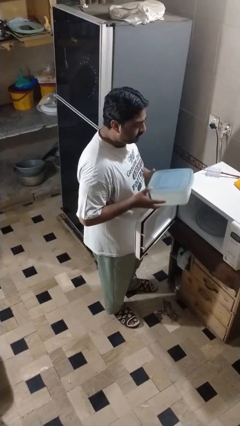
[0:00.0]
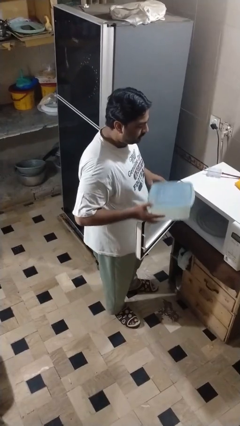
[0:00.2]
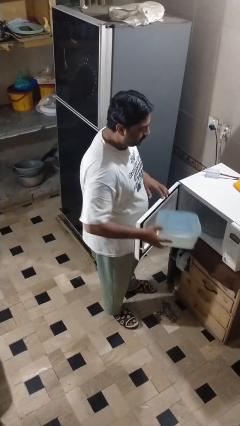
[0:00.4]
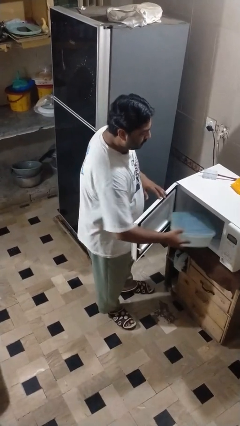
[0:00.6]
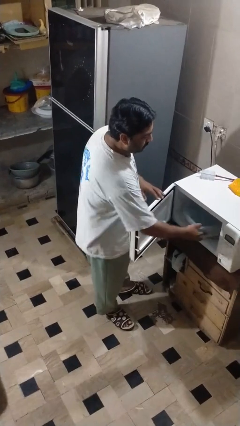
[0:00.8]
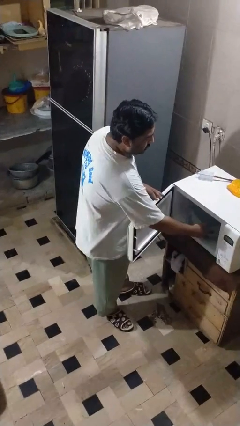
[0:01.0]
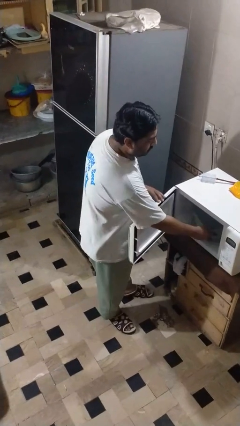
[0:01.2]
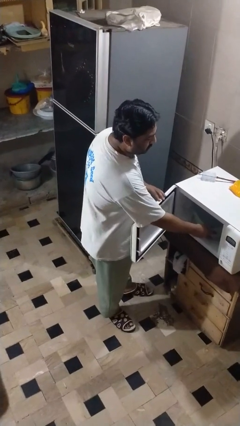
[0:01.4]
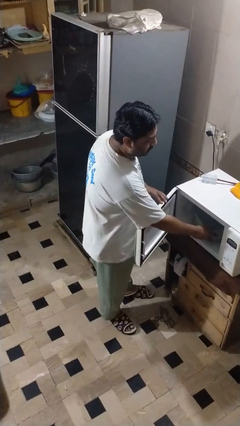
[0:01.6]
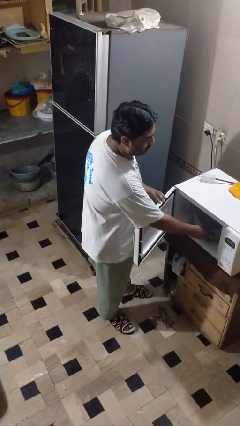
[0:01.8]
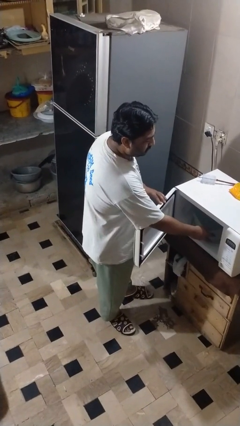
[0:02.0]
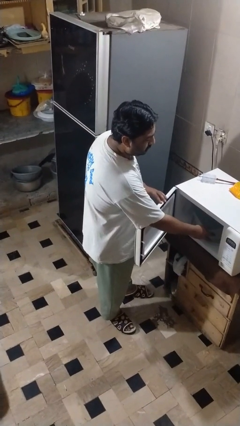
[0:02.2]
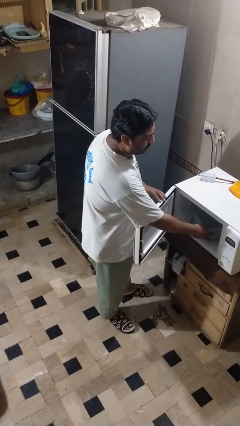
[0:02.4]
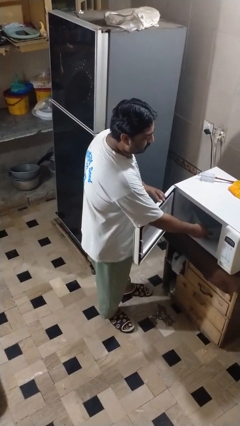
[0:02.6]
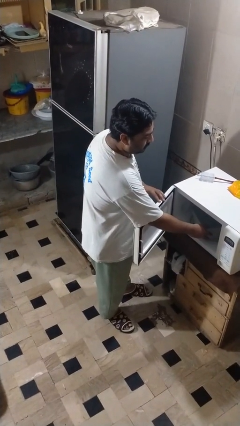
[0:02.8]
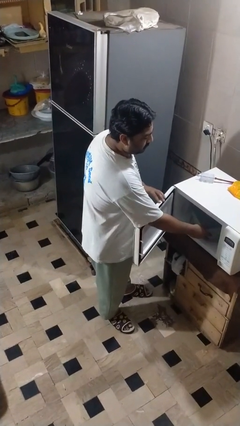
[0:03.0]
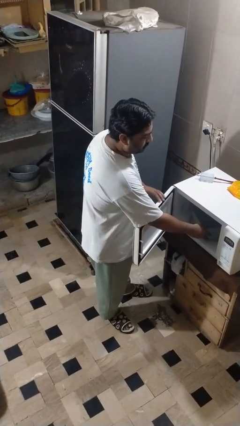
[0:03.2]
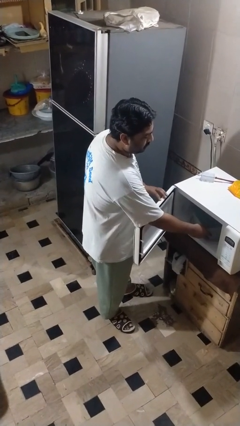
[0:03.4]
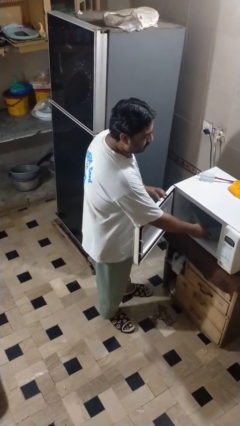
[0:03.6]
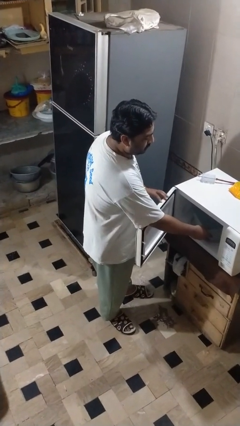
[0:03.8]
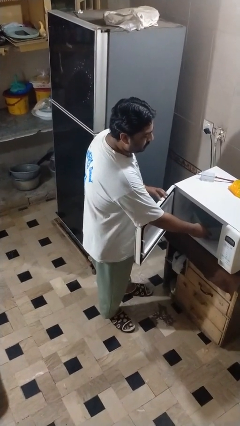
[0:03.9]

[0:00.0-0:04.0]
person puts object into microwave

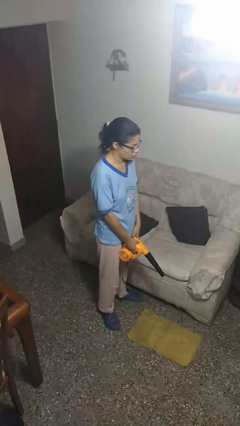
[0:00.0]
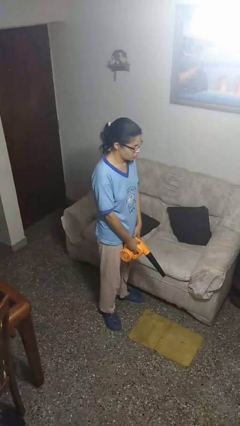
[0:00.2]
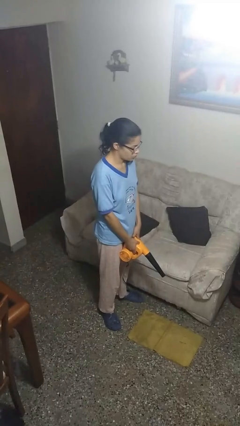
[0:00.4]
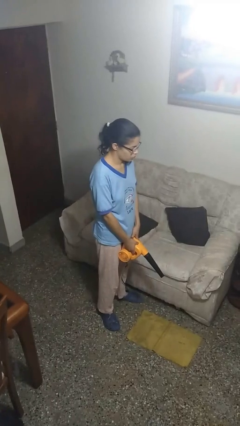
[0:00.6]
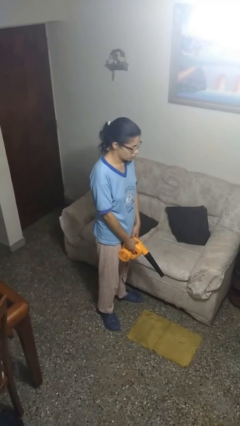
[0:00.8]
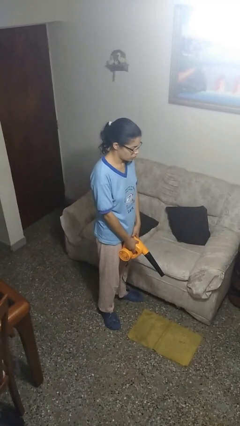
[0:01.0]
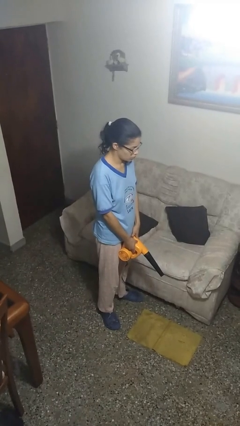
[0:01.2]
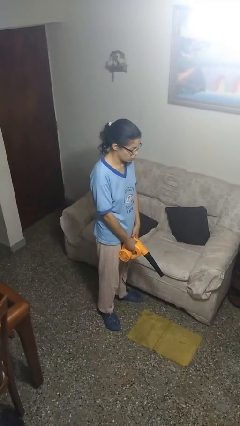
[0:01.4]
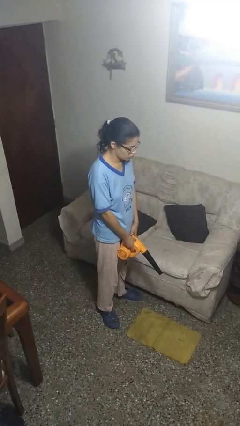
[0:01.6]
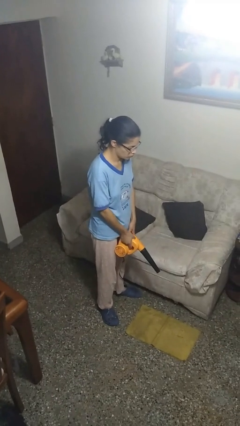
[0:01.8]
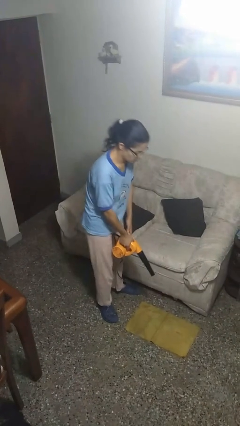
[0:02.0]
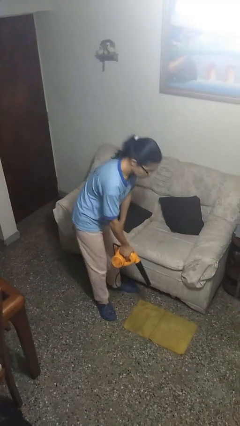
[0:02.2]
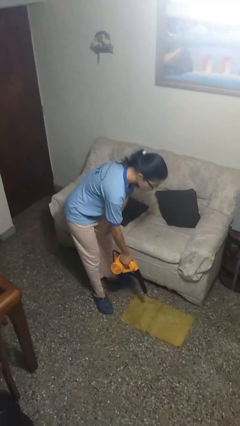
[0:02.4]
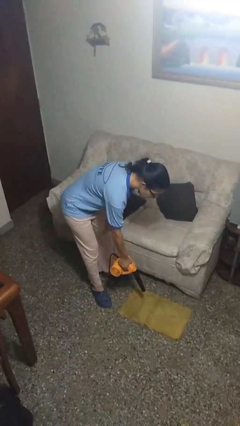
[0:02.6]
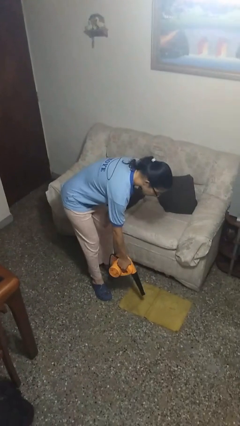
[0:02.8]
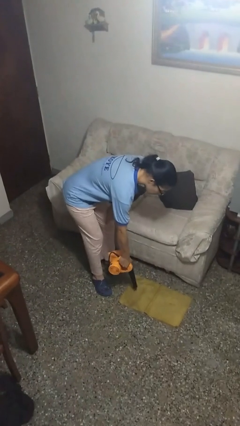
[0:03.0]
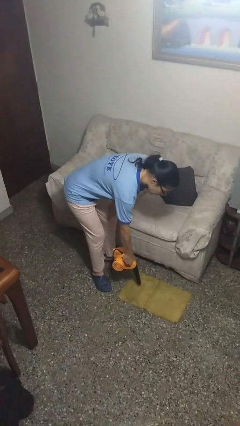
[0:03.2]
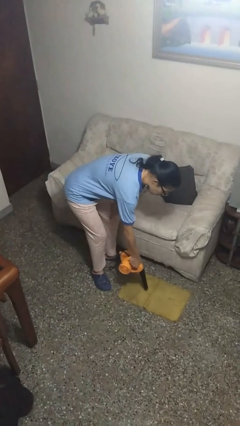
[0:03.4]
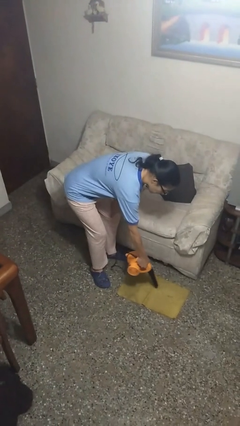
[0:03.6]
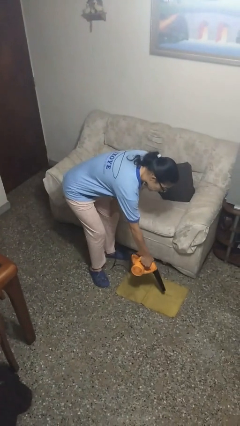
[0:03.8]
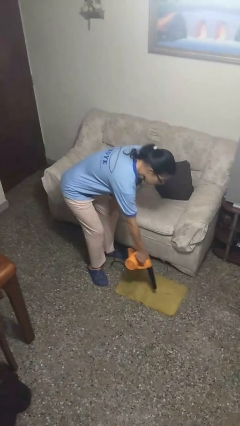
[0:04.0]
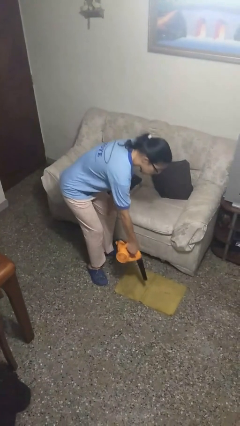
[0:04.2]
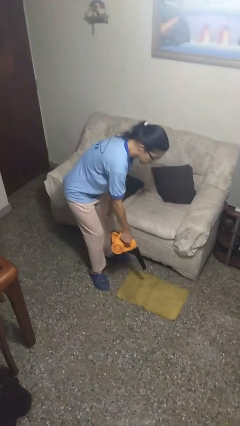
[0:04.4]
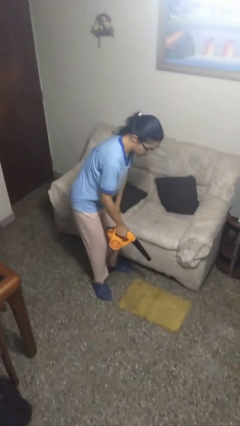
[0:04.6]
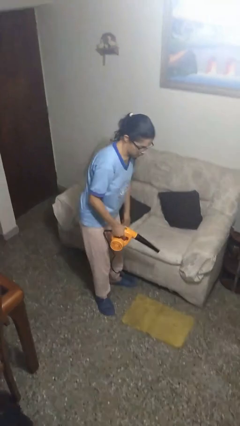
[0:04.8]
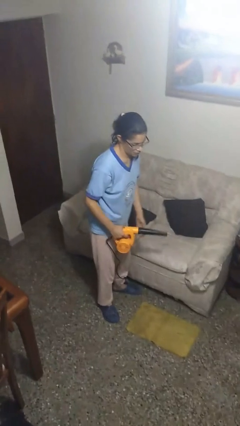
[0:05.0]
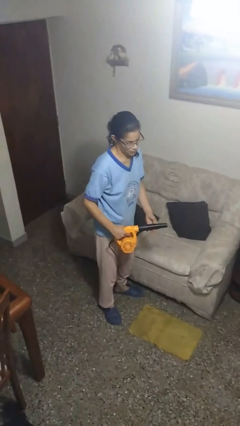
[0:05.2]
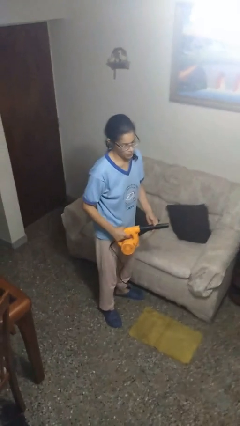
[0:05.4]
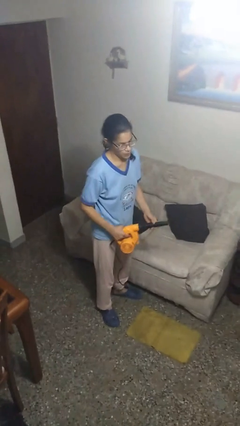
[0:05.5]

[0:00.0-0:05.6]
person vacuums carpet

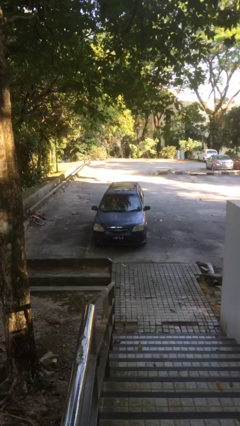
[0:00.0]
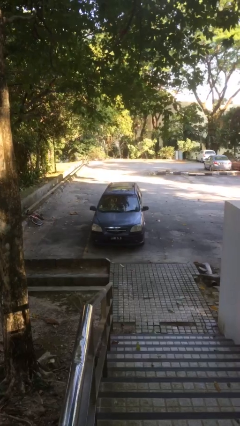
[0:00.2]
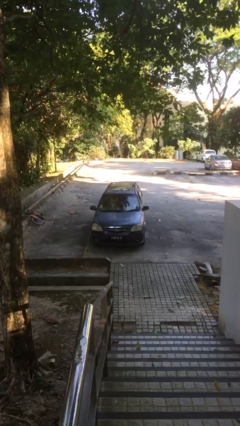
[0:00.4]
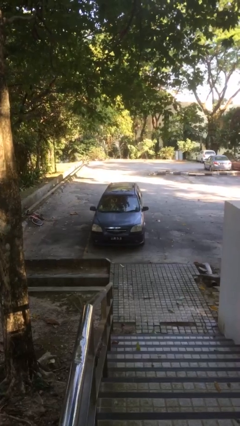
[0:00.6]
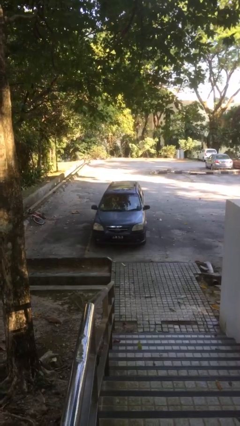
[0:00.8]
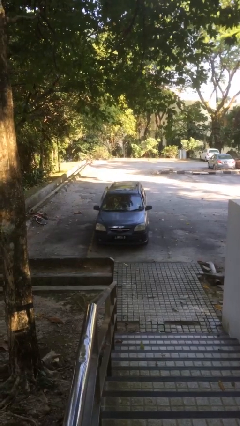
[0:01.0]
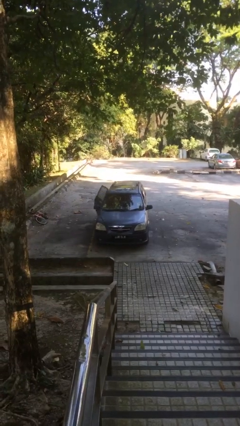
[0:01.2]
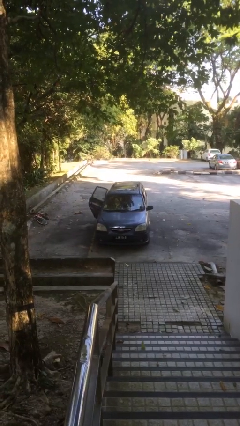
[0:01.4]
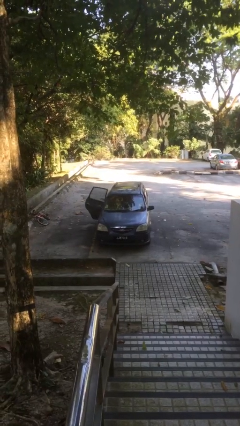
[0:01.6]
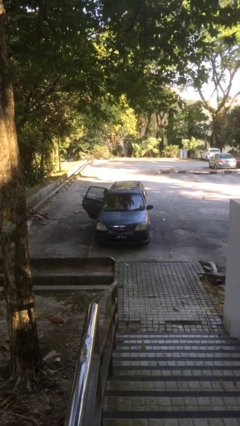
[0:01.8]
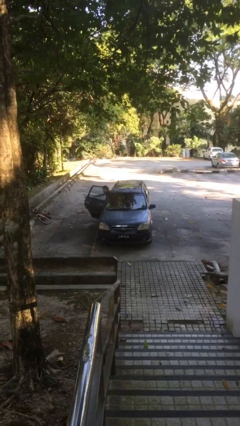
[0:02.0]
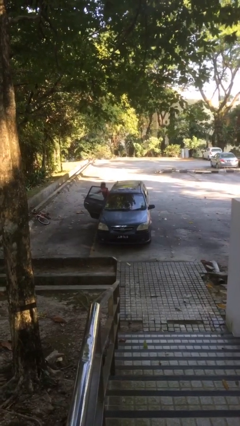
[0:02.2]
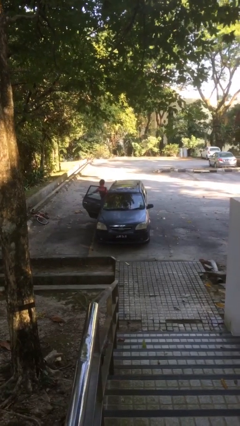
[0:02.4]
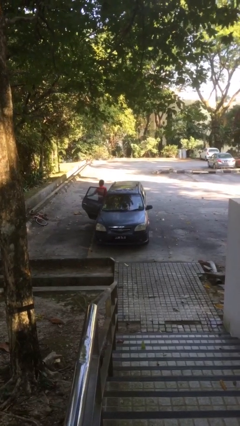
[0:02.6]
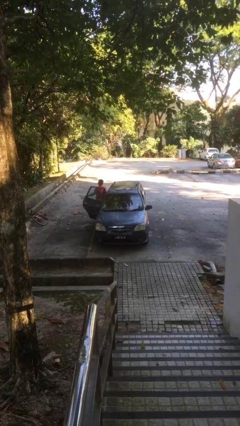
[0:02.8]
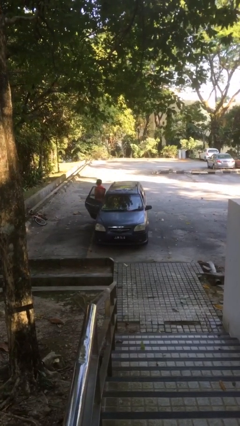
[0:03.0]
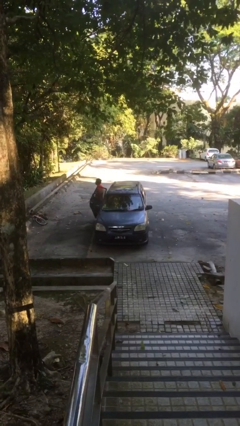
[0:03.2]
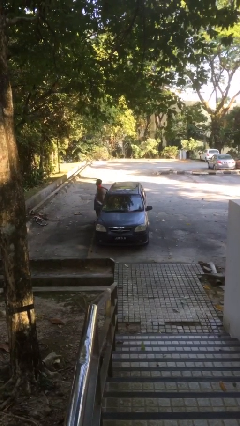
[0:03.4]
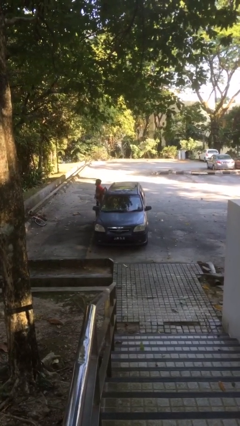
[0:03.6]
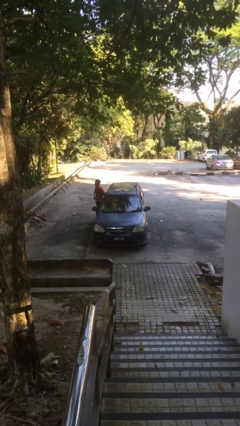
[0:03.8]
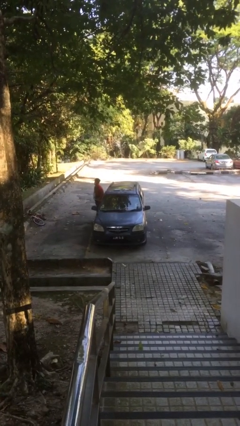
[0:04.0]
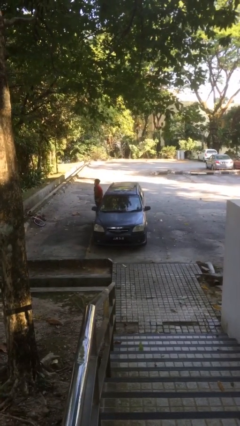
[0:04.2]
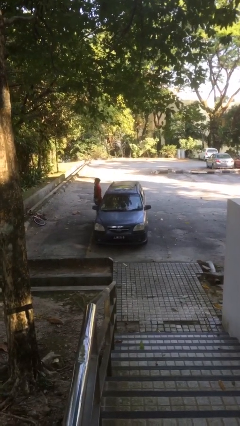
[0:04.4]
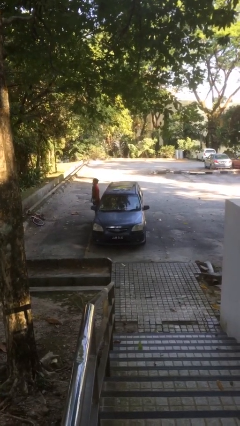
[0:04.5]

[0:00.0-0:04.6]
car drops off person

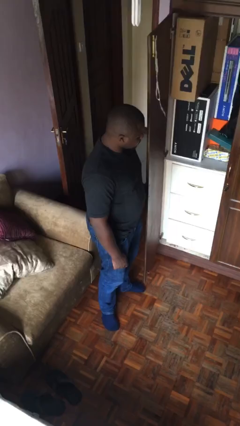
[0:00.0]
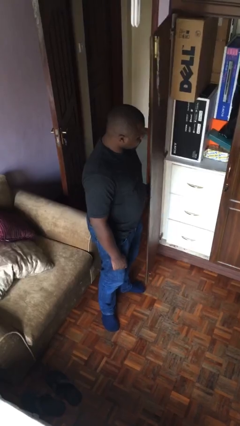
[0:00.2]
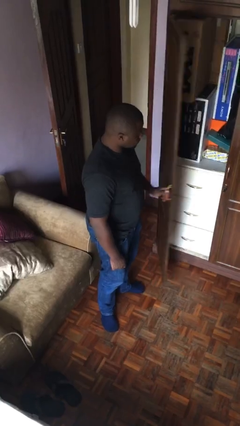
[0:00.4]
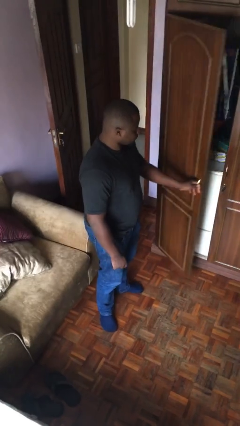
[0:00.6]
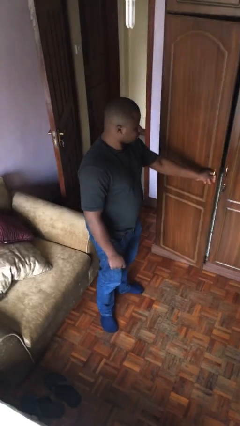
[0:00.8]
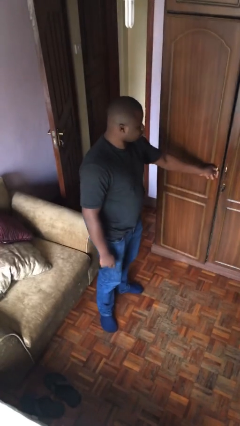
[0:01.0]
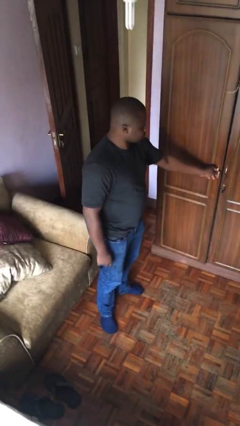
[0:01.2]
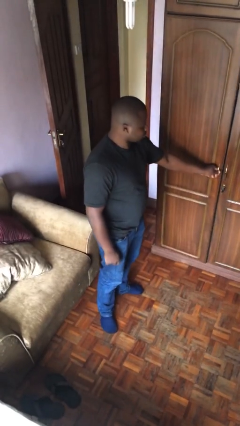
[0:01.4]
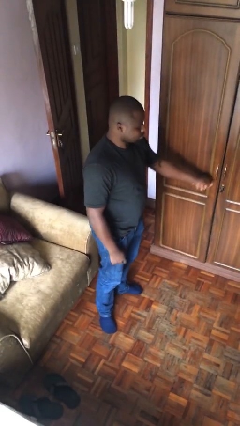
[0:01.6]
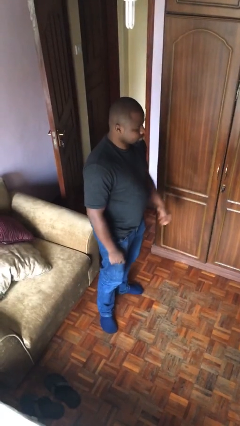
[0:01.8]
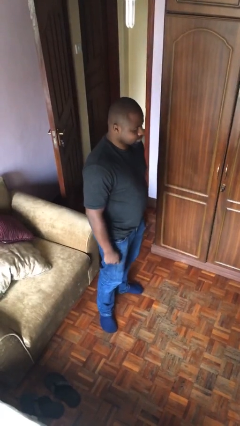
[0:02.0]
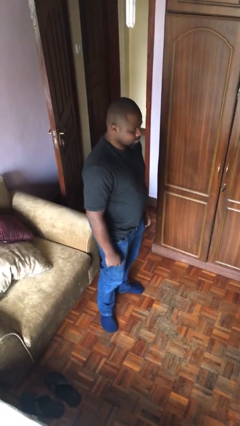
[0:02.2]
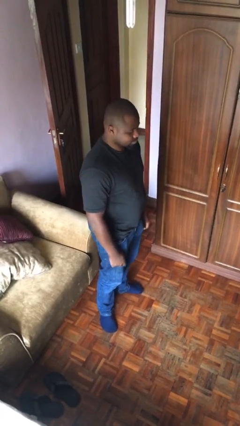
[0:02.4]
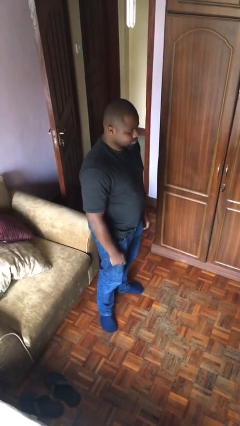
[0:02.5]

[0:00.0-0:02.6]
person closes dresser drawer

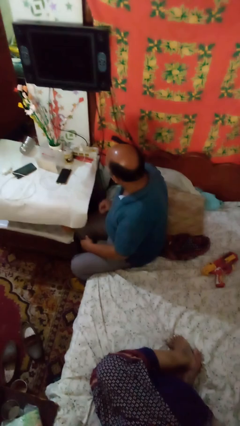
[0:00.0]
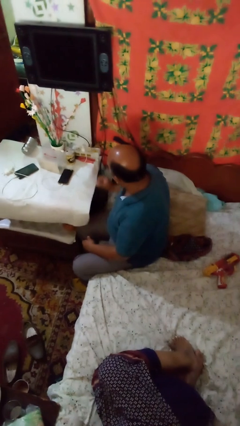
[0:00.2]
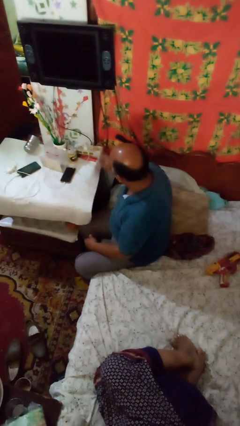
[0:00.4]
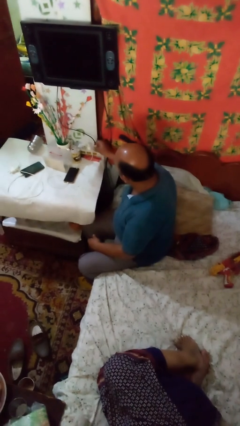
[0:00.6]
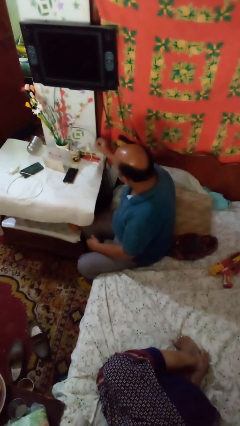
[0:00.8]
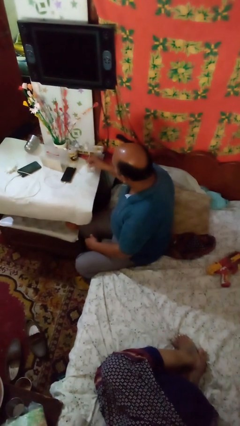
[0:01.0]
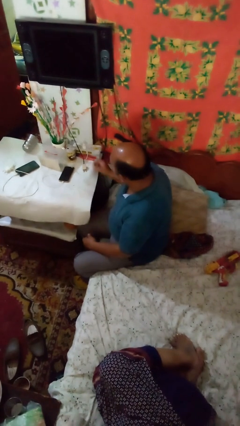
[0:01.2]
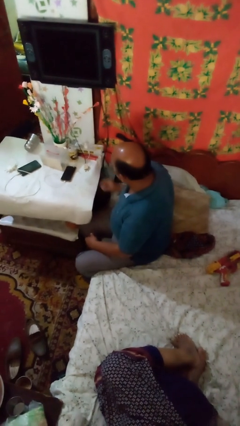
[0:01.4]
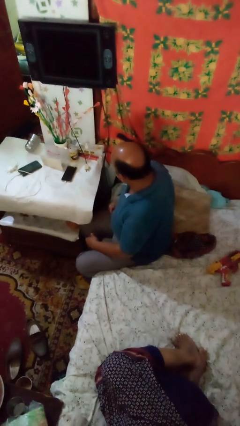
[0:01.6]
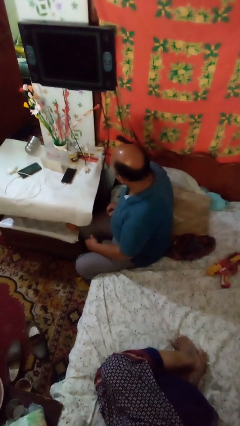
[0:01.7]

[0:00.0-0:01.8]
person unplugs from electrical socket
